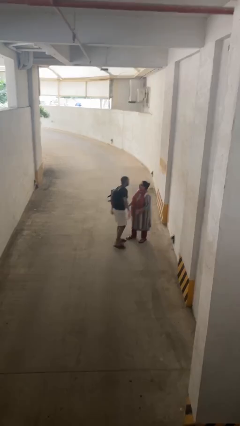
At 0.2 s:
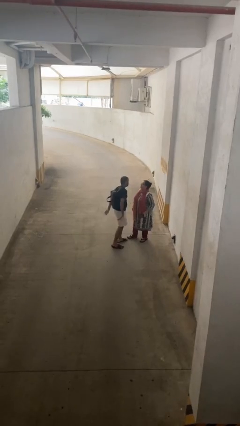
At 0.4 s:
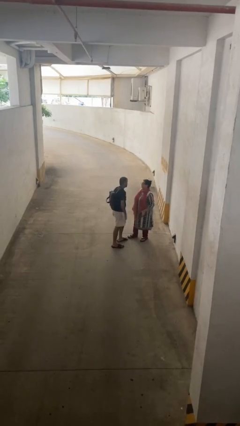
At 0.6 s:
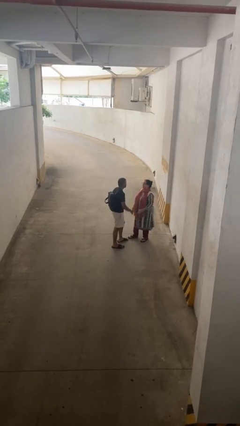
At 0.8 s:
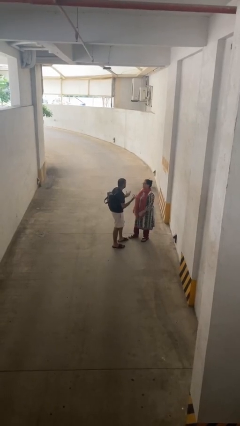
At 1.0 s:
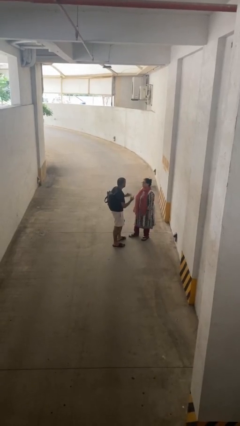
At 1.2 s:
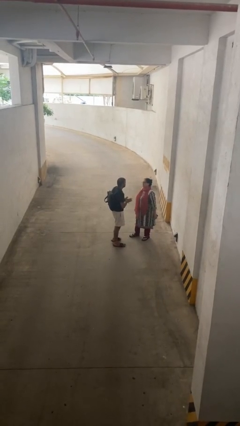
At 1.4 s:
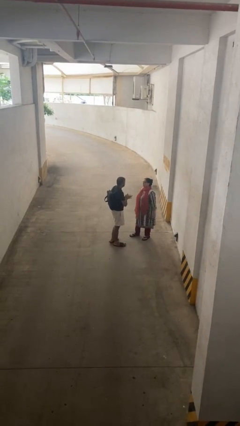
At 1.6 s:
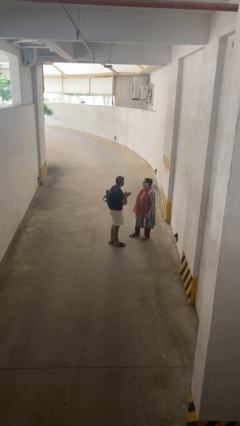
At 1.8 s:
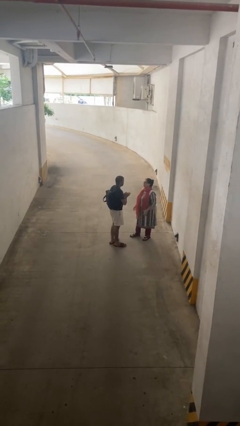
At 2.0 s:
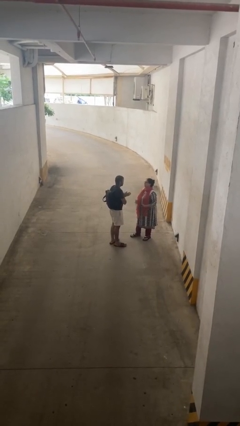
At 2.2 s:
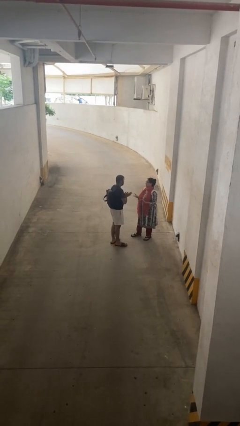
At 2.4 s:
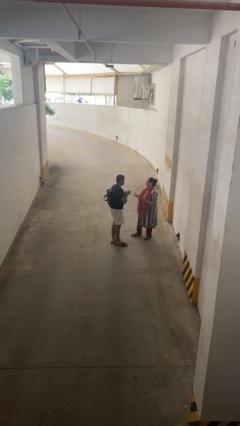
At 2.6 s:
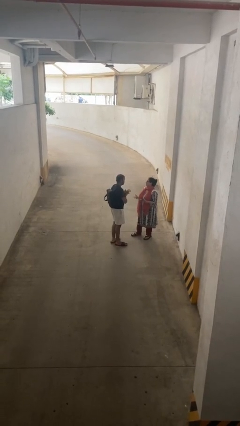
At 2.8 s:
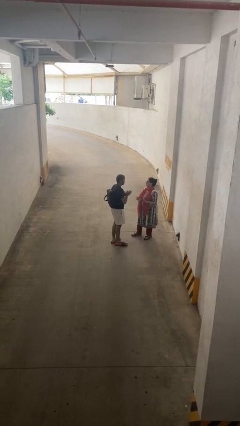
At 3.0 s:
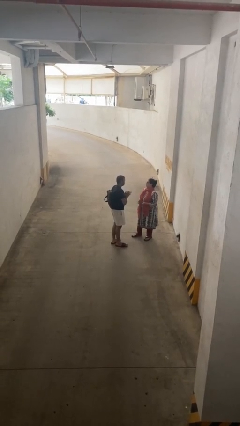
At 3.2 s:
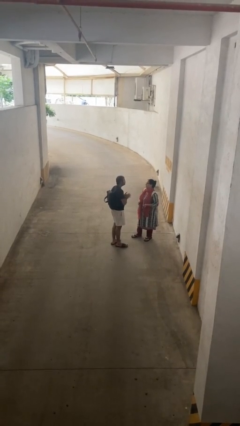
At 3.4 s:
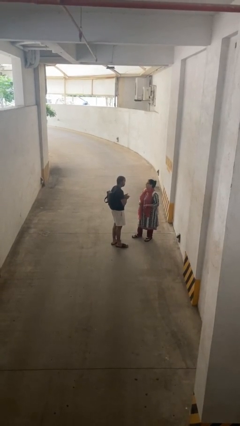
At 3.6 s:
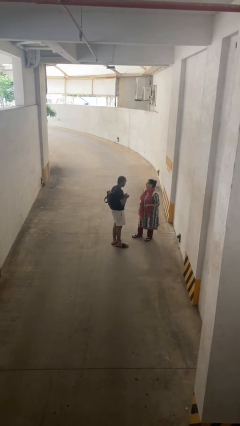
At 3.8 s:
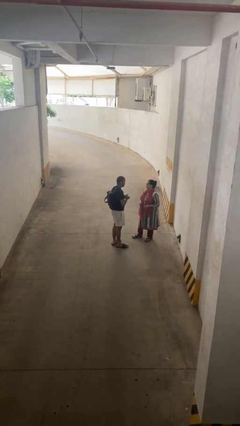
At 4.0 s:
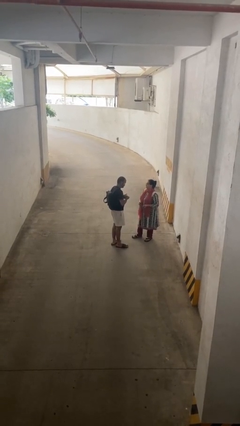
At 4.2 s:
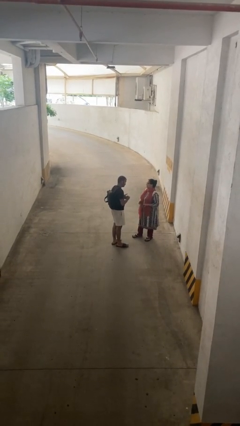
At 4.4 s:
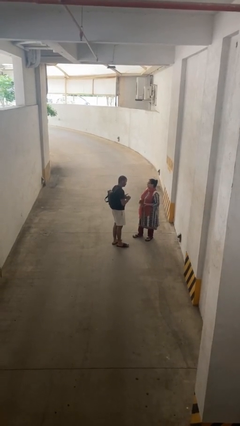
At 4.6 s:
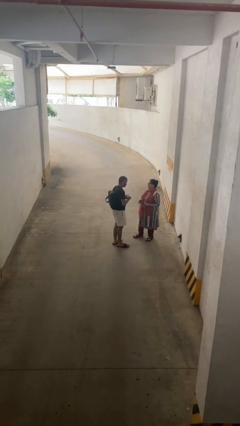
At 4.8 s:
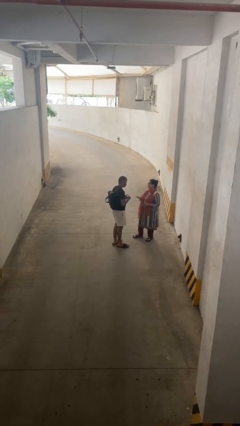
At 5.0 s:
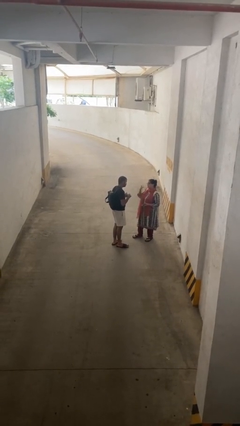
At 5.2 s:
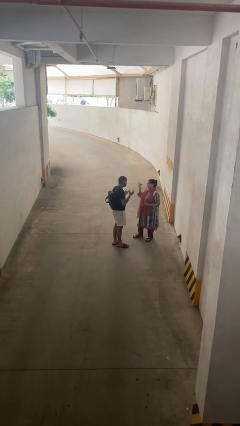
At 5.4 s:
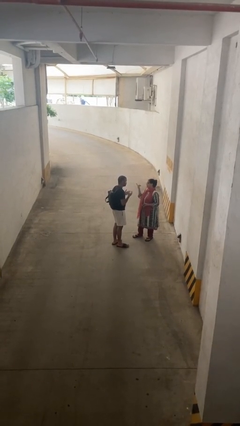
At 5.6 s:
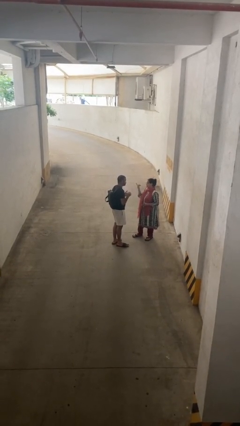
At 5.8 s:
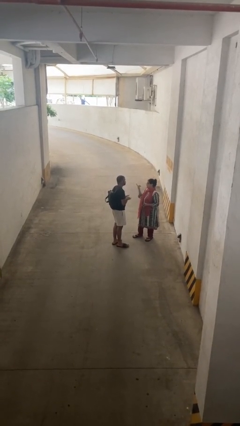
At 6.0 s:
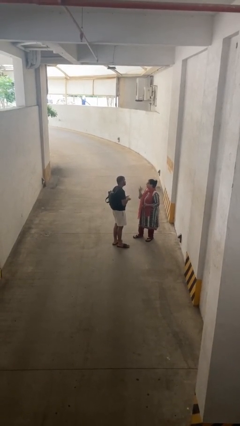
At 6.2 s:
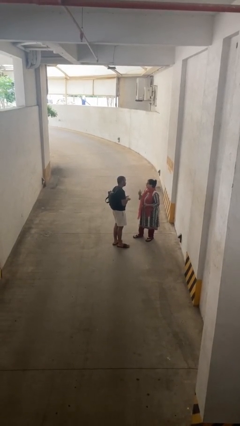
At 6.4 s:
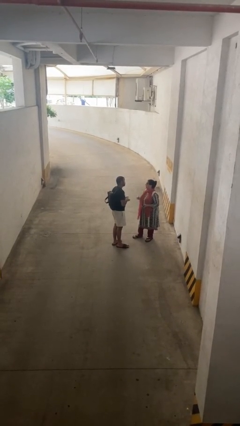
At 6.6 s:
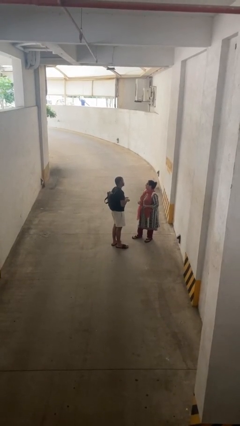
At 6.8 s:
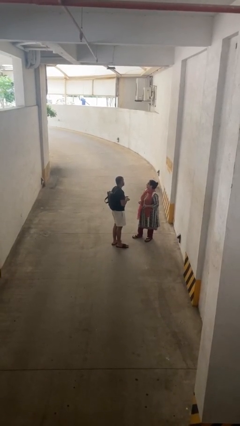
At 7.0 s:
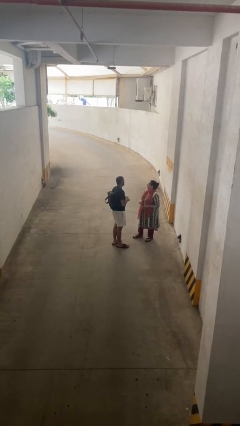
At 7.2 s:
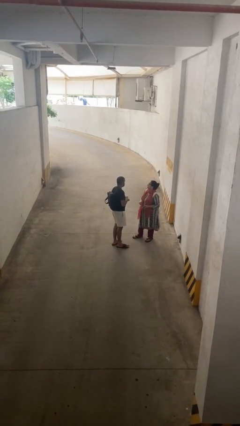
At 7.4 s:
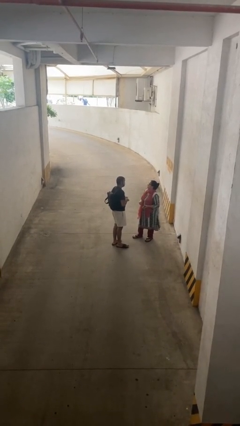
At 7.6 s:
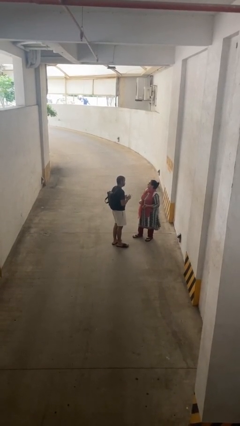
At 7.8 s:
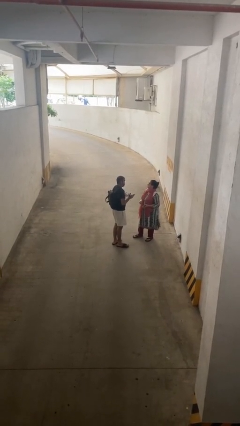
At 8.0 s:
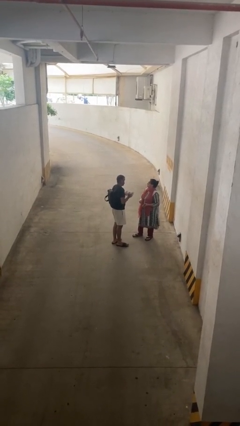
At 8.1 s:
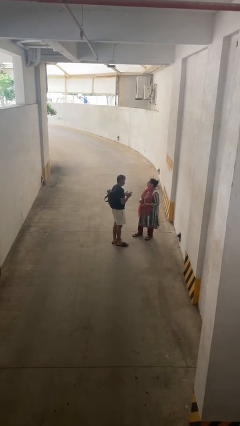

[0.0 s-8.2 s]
person talks to person

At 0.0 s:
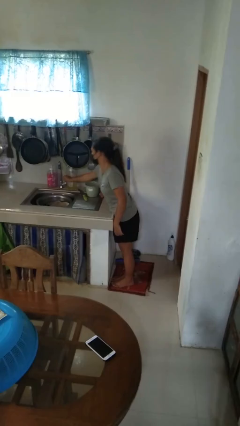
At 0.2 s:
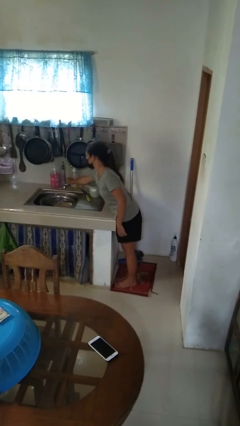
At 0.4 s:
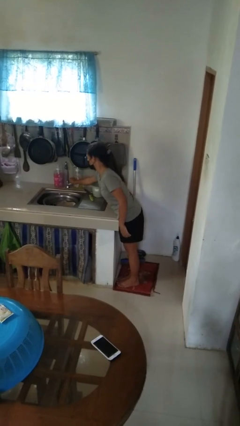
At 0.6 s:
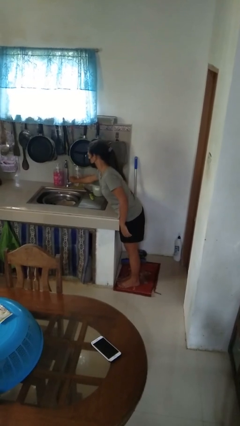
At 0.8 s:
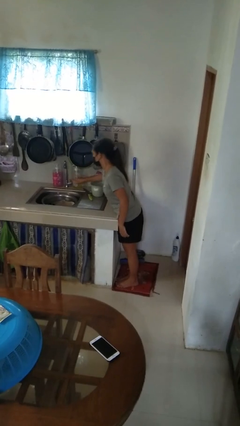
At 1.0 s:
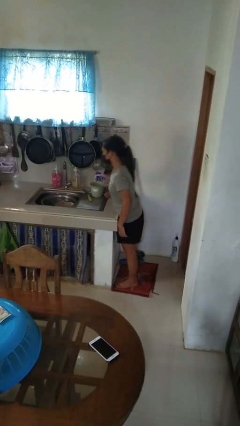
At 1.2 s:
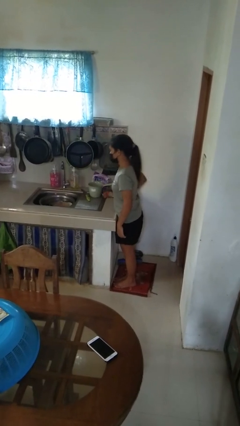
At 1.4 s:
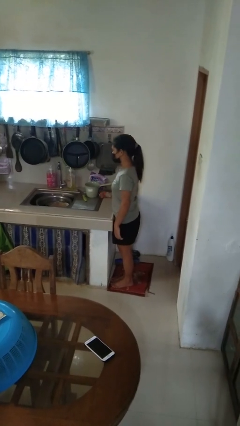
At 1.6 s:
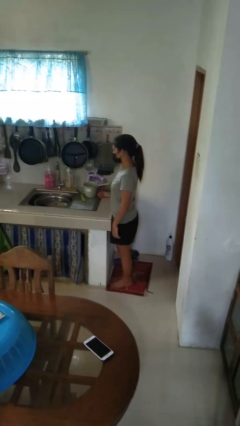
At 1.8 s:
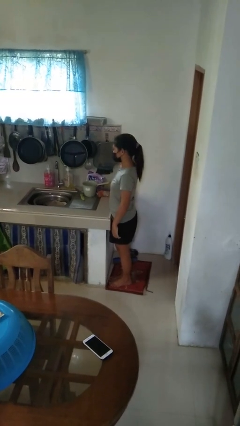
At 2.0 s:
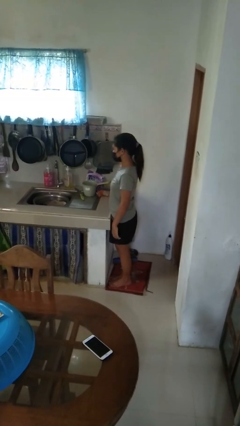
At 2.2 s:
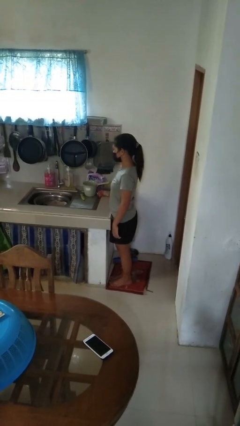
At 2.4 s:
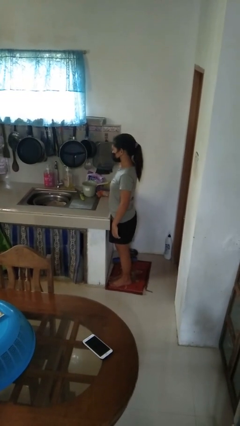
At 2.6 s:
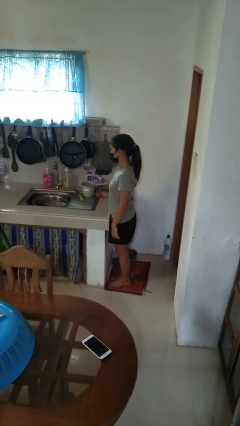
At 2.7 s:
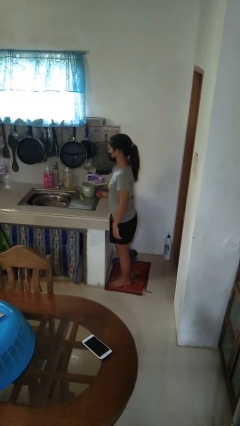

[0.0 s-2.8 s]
person turns on faucet

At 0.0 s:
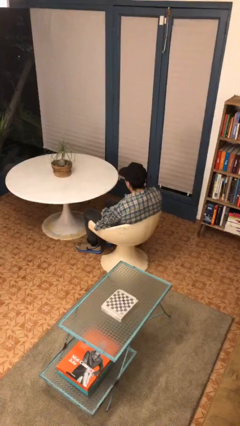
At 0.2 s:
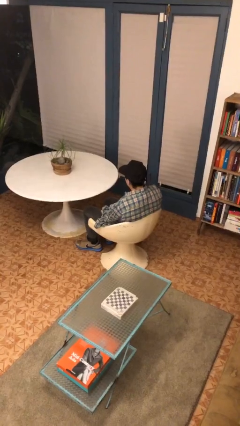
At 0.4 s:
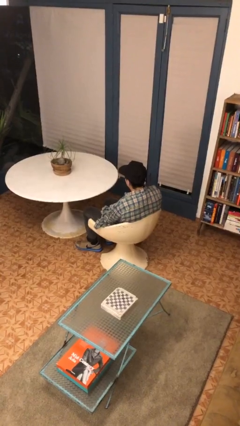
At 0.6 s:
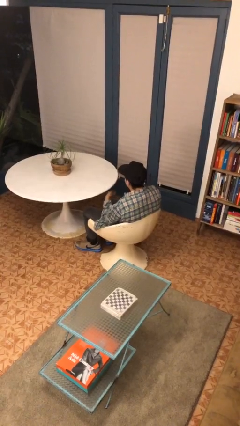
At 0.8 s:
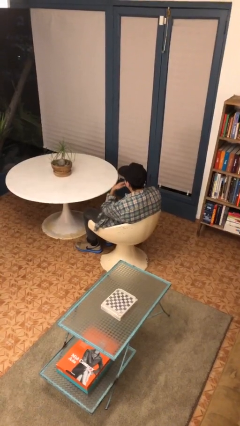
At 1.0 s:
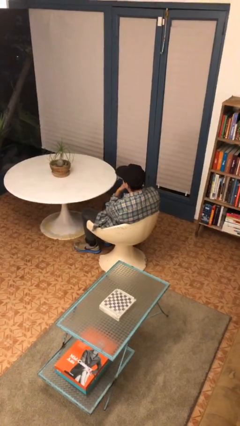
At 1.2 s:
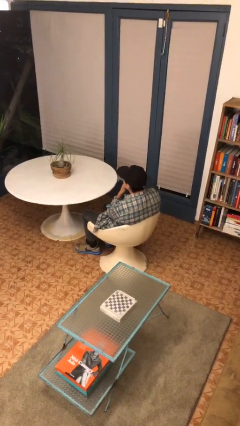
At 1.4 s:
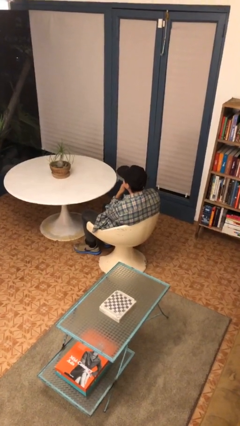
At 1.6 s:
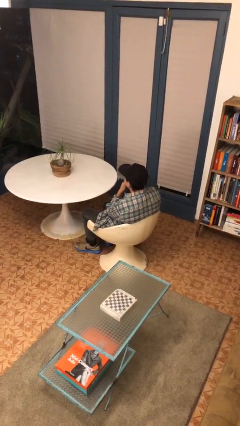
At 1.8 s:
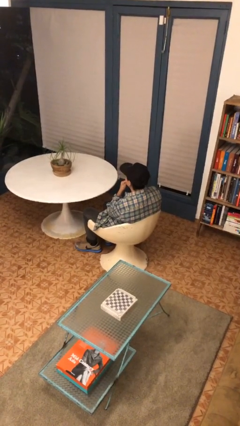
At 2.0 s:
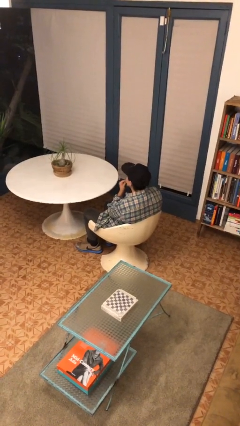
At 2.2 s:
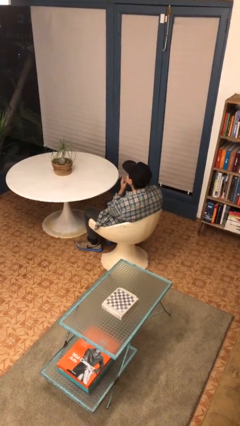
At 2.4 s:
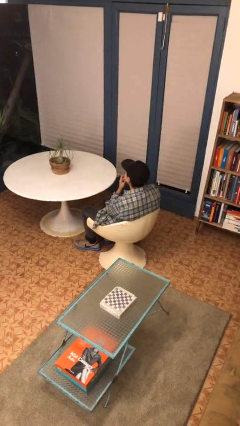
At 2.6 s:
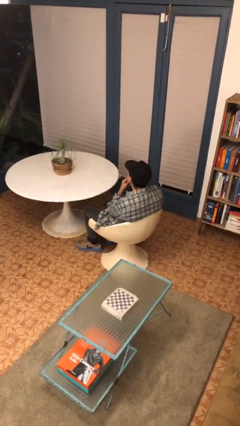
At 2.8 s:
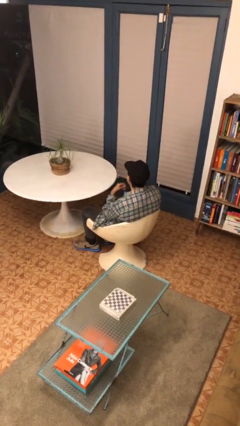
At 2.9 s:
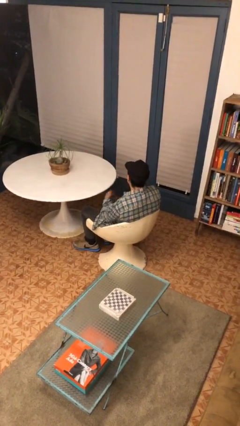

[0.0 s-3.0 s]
person strokes chin

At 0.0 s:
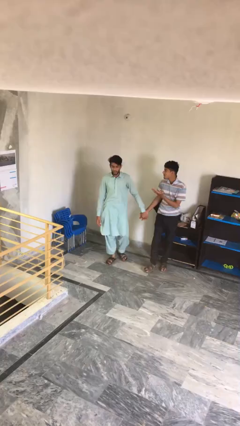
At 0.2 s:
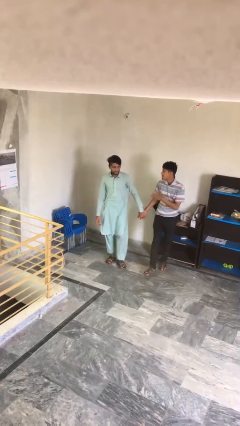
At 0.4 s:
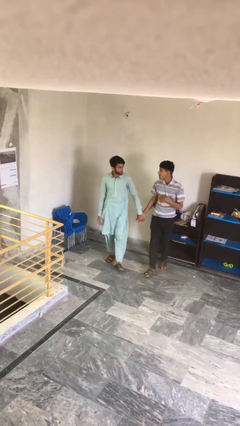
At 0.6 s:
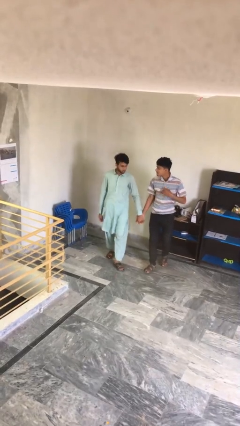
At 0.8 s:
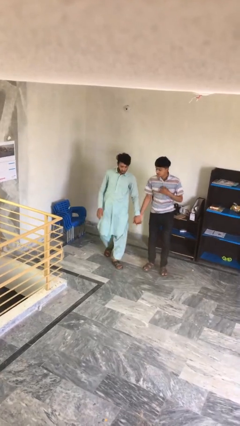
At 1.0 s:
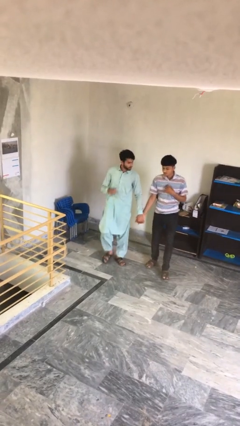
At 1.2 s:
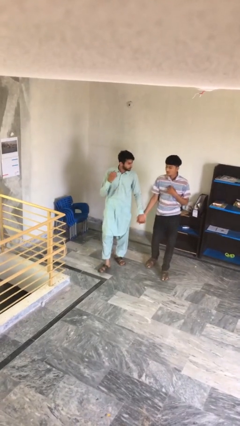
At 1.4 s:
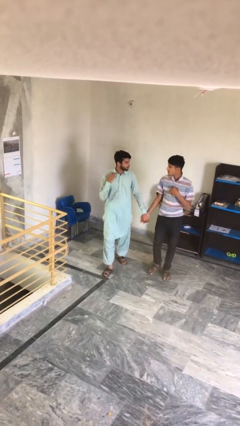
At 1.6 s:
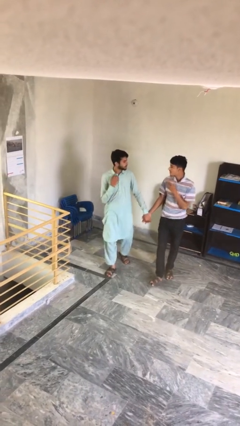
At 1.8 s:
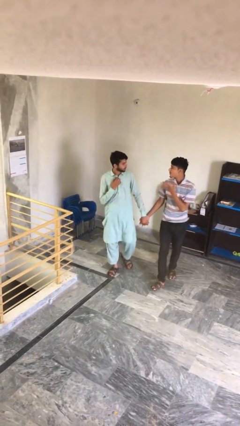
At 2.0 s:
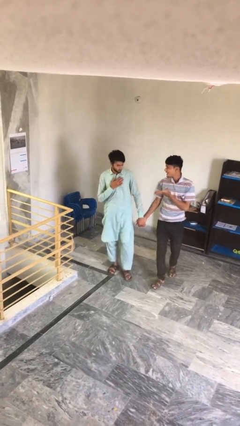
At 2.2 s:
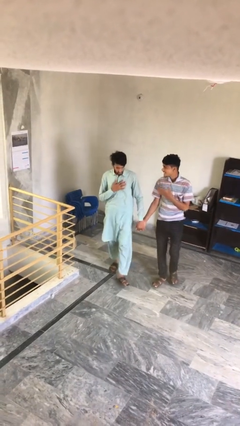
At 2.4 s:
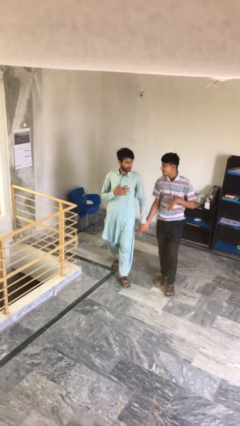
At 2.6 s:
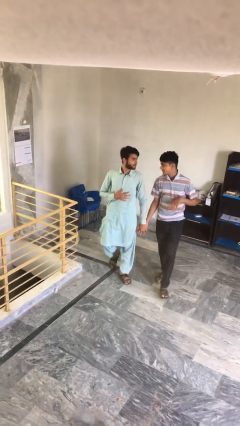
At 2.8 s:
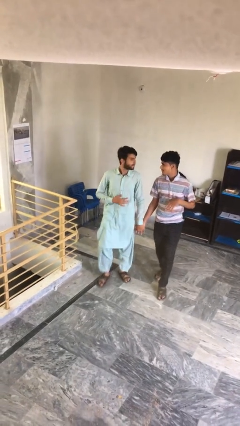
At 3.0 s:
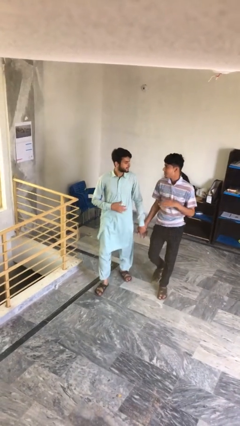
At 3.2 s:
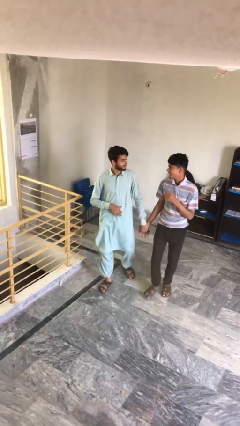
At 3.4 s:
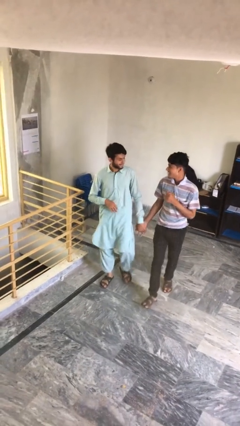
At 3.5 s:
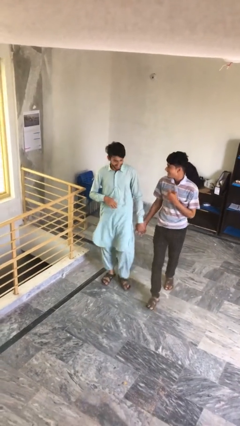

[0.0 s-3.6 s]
person holds hand
